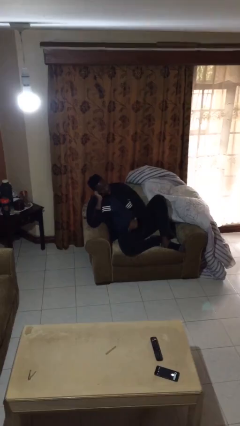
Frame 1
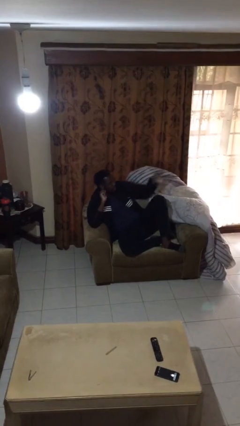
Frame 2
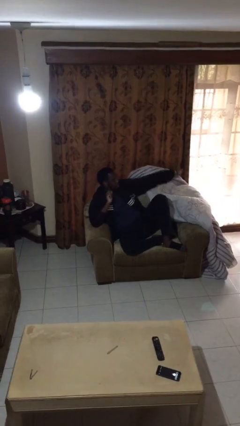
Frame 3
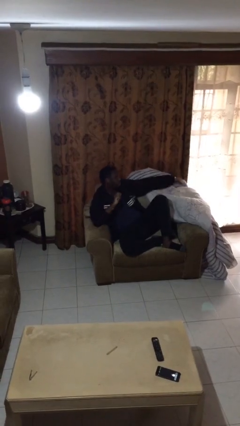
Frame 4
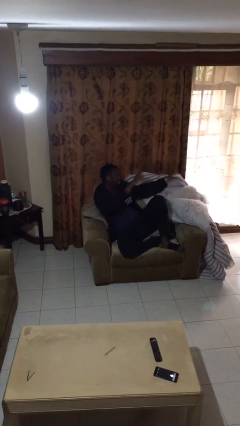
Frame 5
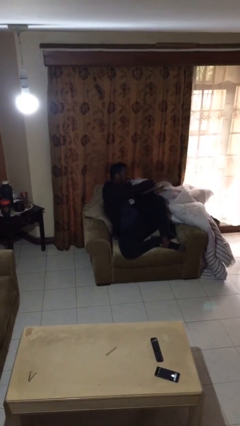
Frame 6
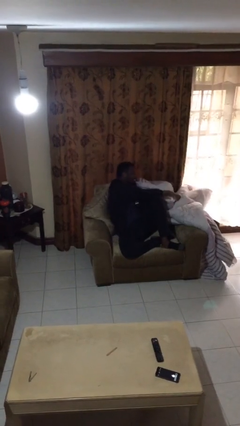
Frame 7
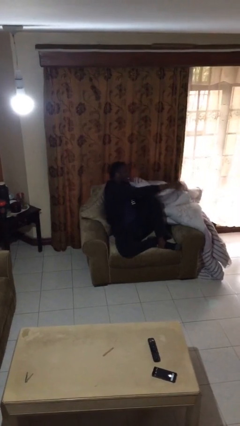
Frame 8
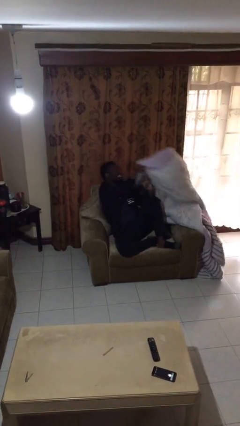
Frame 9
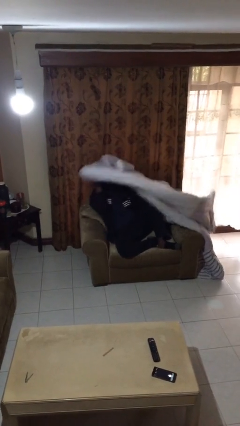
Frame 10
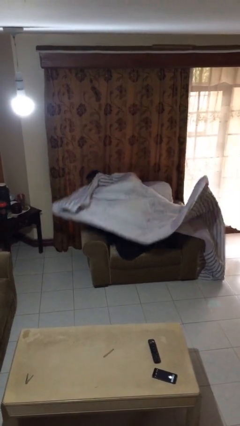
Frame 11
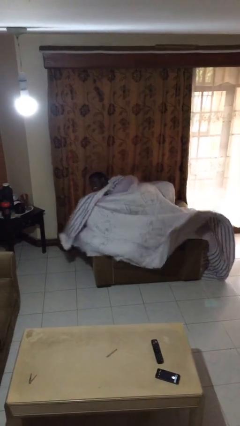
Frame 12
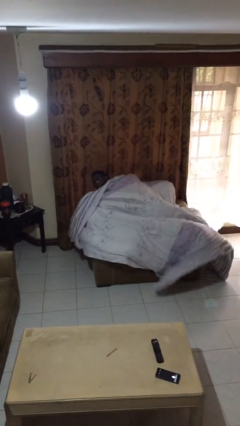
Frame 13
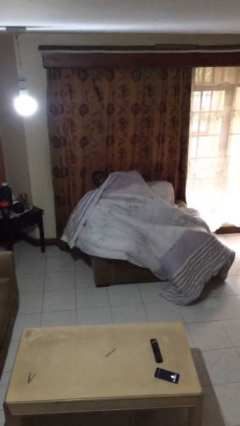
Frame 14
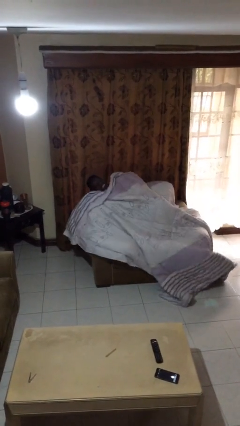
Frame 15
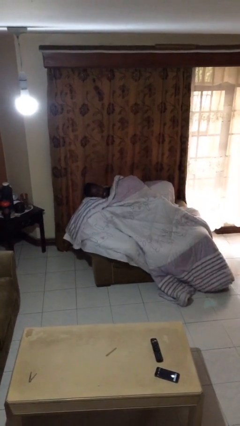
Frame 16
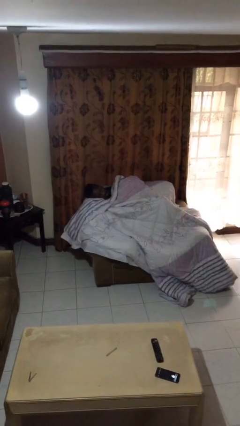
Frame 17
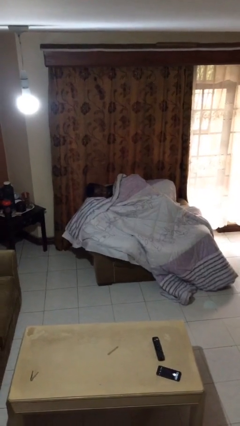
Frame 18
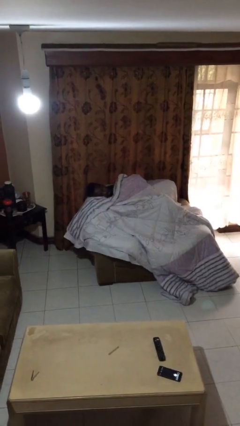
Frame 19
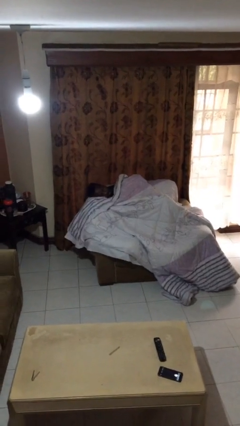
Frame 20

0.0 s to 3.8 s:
person covers with blanket

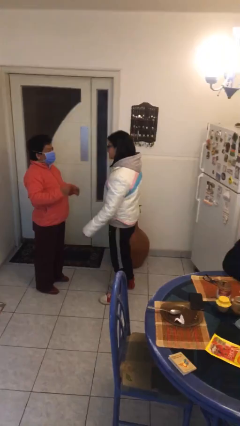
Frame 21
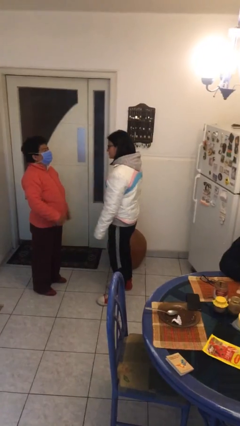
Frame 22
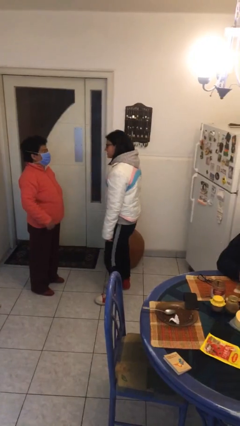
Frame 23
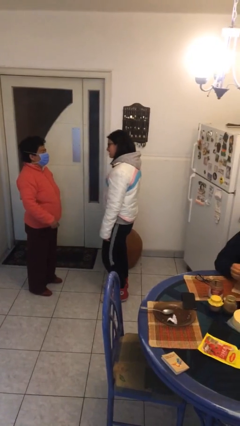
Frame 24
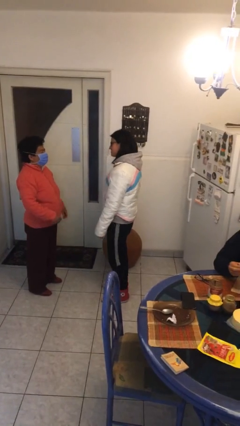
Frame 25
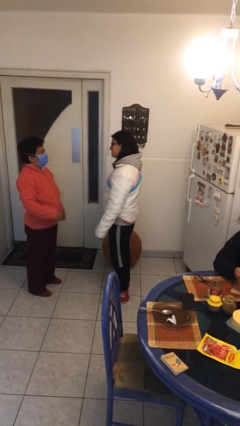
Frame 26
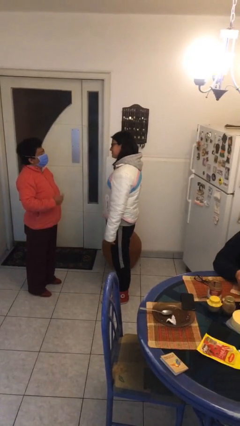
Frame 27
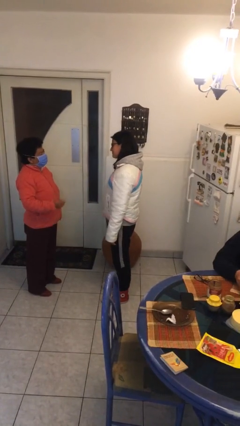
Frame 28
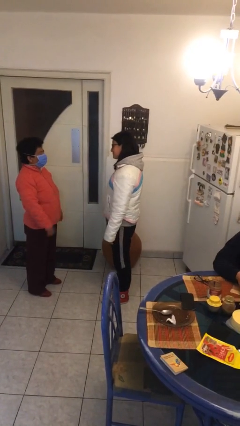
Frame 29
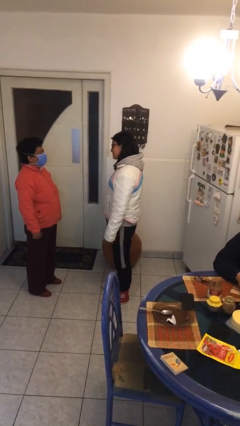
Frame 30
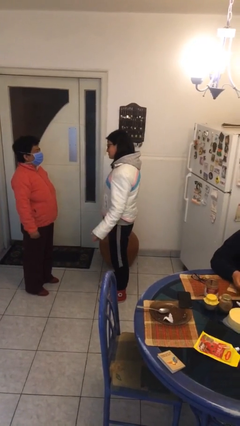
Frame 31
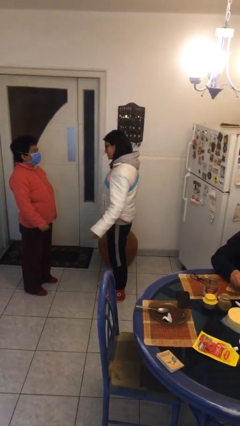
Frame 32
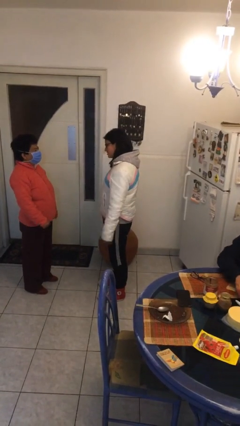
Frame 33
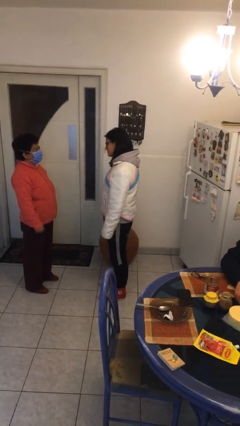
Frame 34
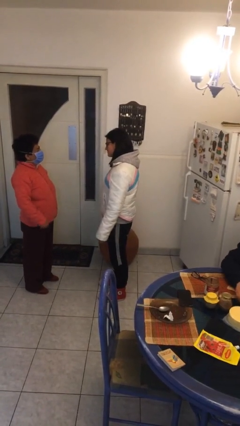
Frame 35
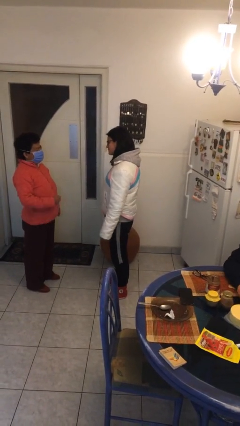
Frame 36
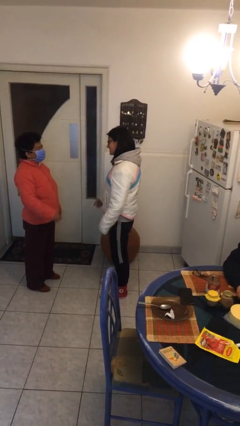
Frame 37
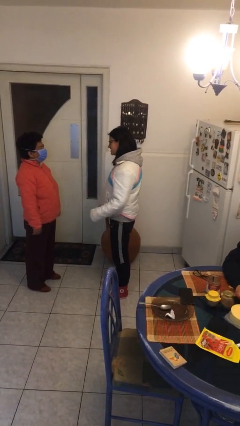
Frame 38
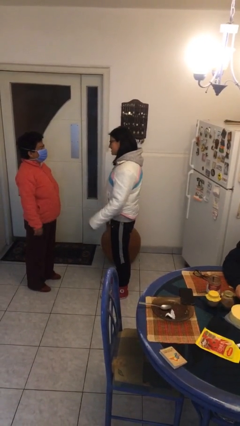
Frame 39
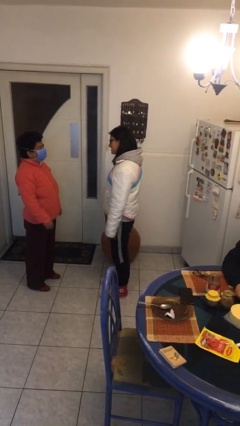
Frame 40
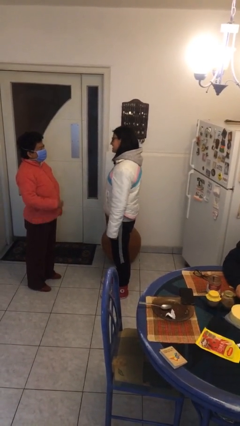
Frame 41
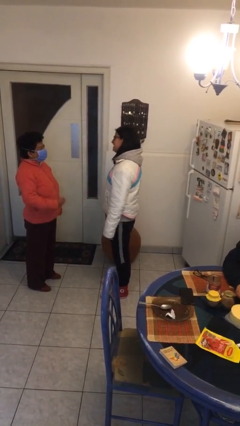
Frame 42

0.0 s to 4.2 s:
person talks to person

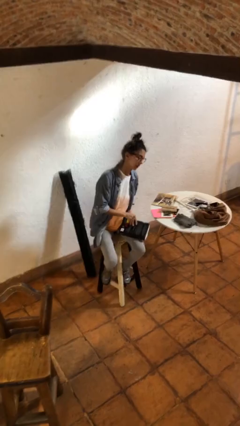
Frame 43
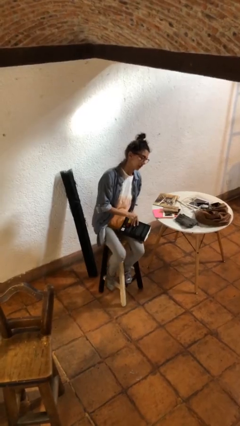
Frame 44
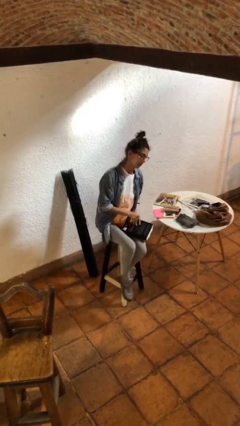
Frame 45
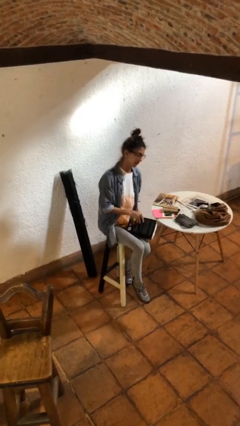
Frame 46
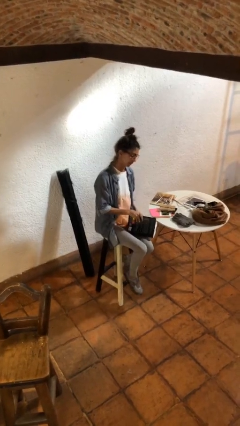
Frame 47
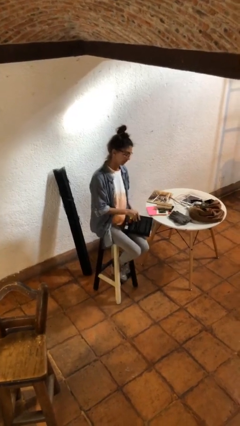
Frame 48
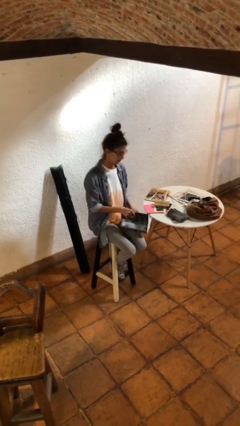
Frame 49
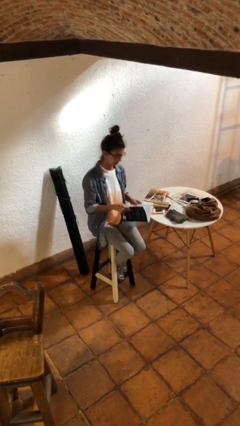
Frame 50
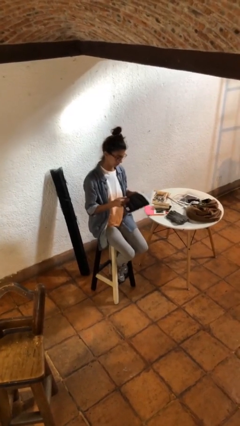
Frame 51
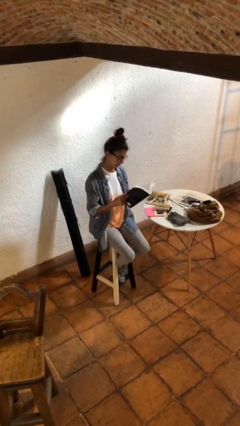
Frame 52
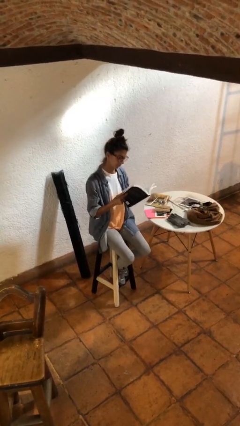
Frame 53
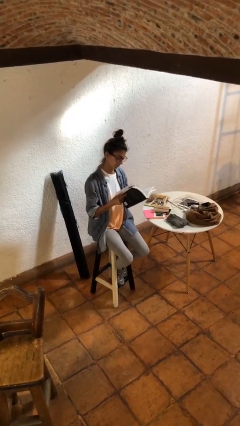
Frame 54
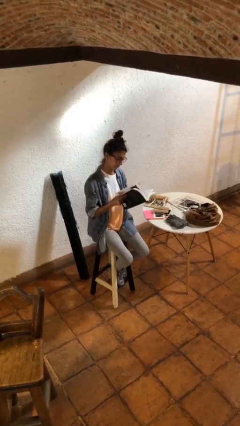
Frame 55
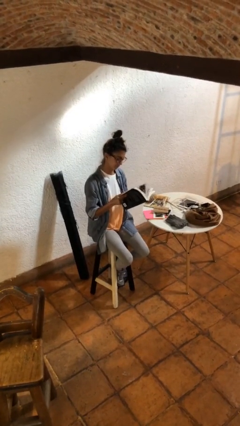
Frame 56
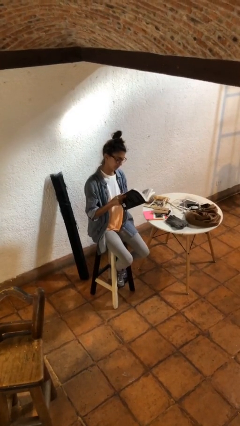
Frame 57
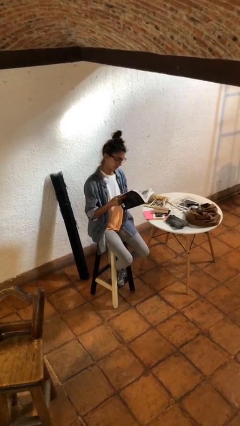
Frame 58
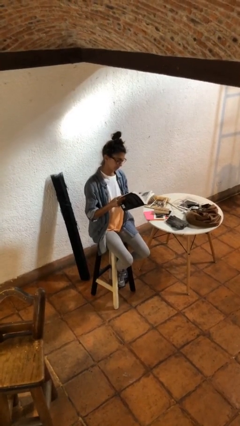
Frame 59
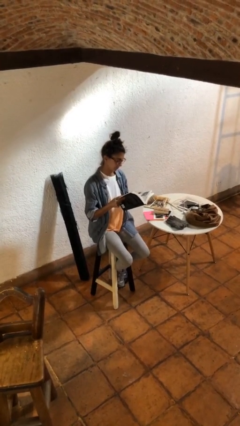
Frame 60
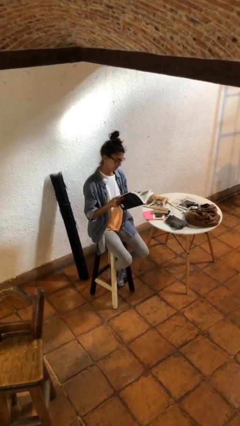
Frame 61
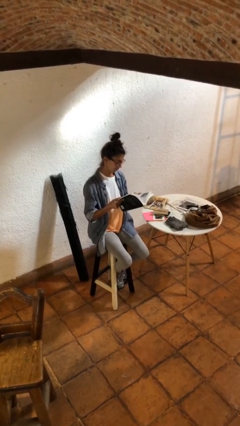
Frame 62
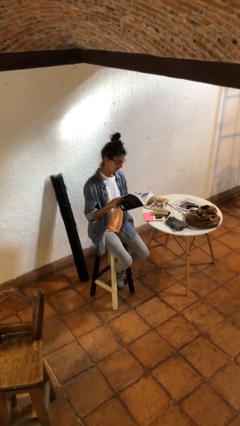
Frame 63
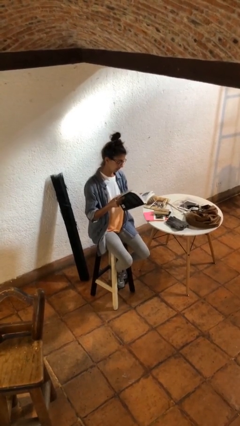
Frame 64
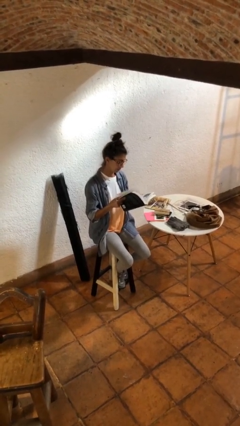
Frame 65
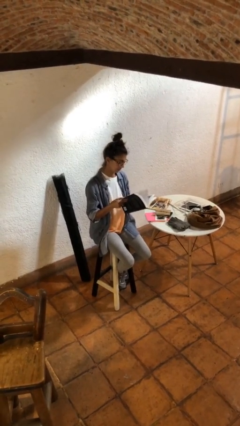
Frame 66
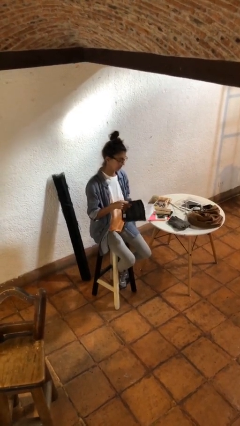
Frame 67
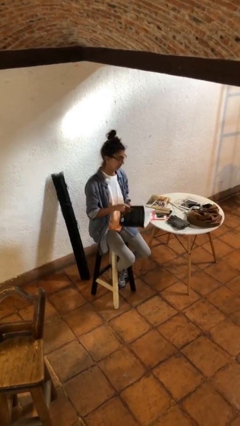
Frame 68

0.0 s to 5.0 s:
person reads book

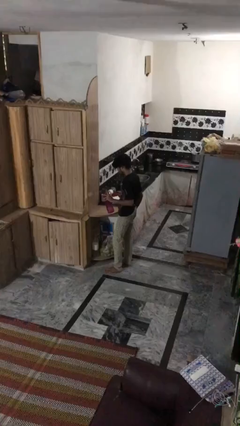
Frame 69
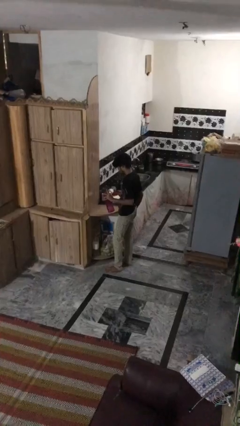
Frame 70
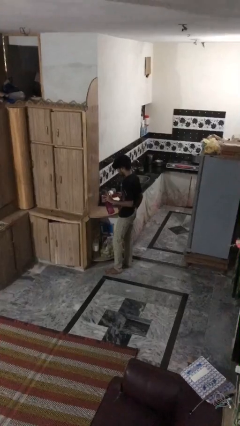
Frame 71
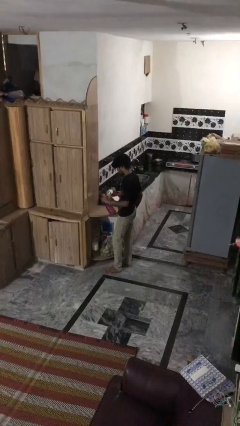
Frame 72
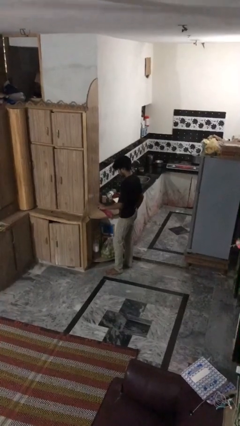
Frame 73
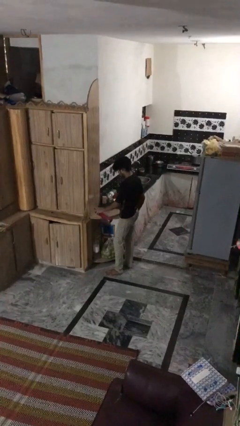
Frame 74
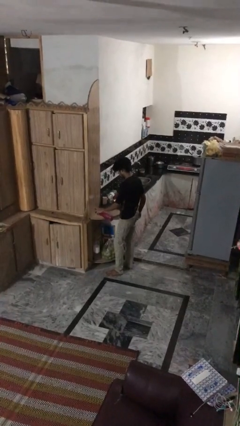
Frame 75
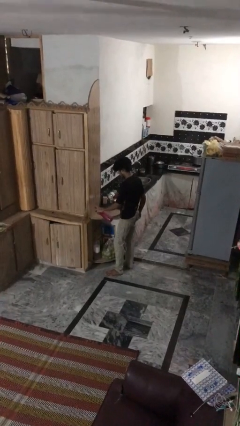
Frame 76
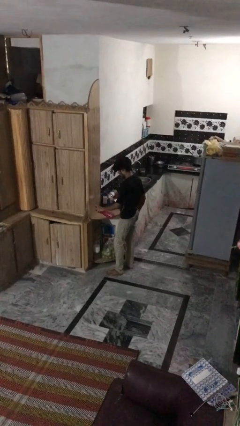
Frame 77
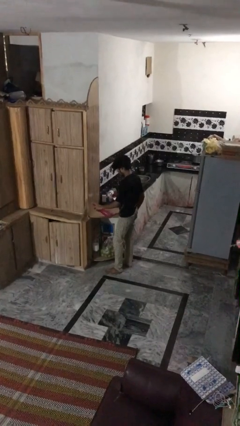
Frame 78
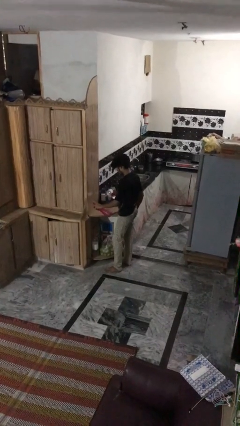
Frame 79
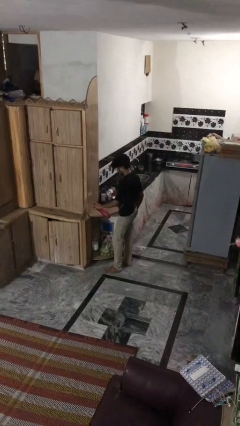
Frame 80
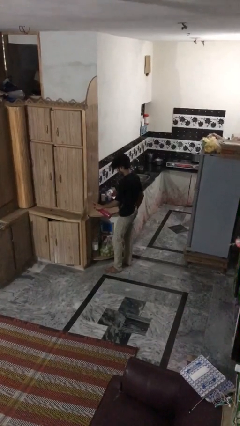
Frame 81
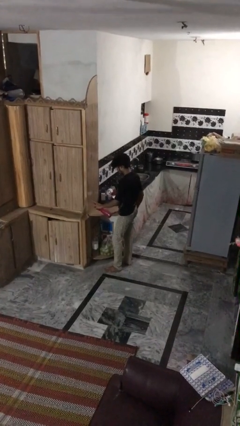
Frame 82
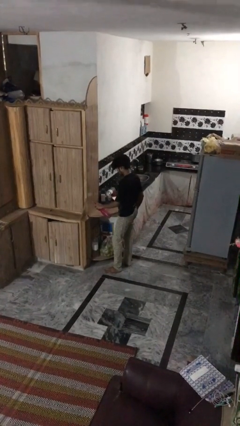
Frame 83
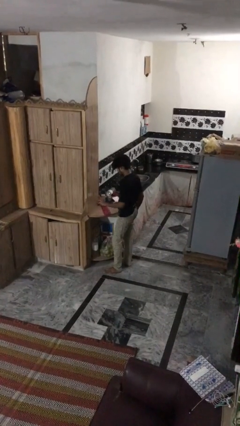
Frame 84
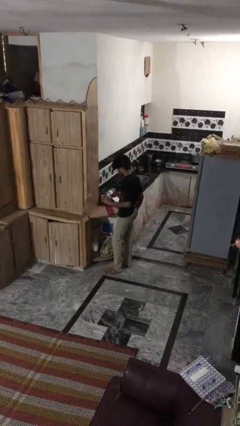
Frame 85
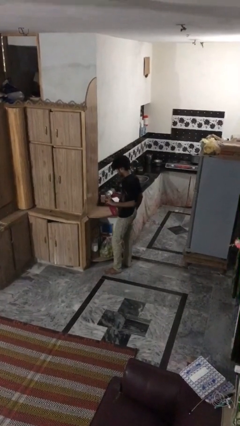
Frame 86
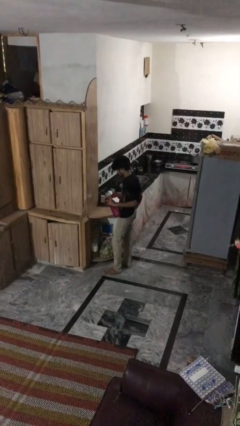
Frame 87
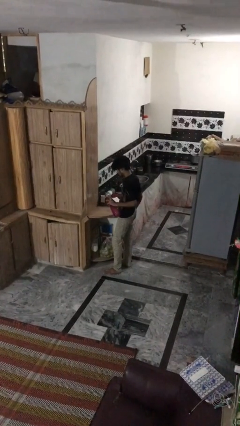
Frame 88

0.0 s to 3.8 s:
person sprays from bottle

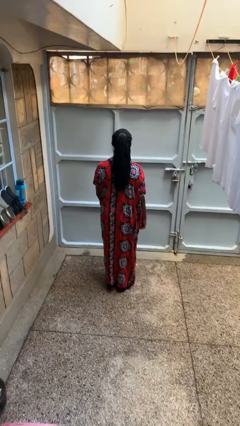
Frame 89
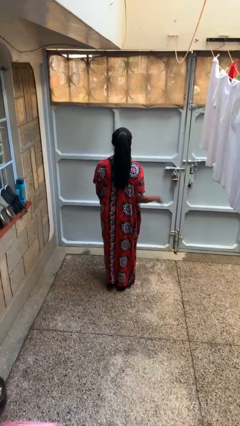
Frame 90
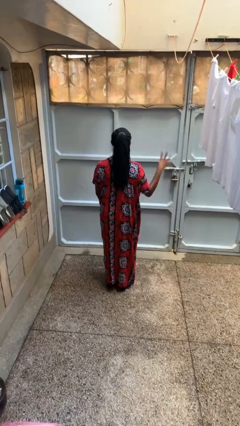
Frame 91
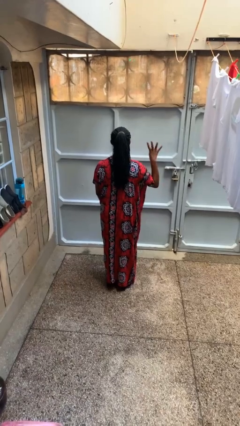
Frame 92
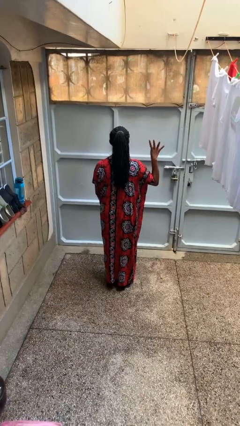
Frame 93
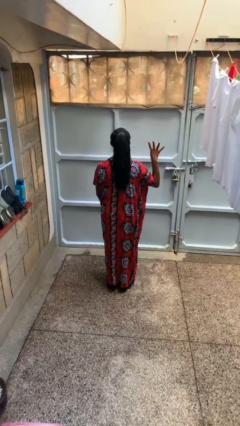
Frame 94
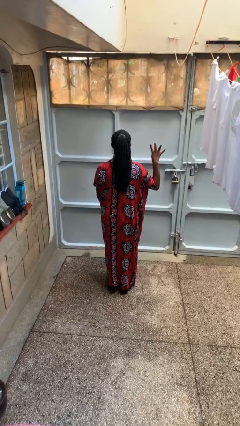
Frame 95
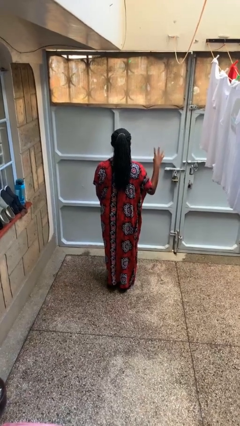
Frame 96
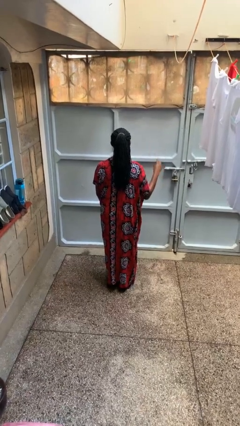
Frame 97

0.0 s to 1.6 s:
person gestures number four
